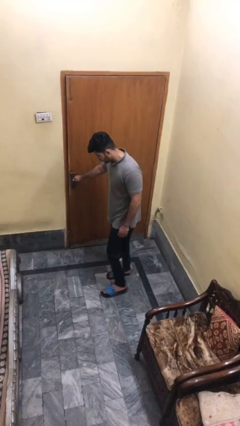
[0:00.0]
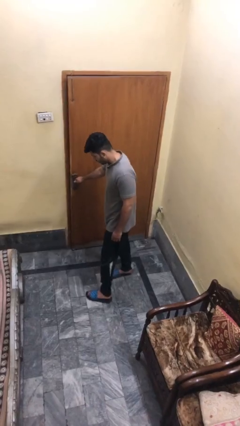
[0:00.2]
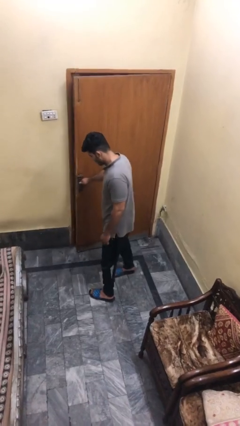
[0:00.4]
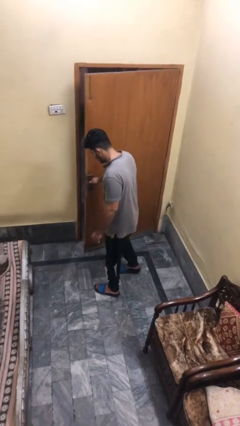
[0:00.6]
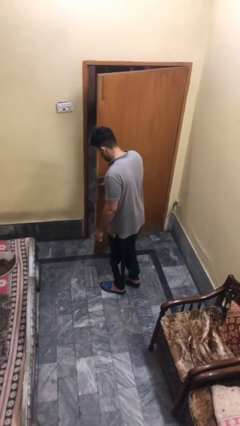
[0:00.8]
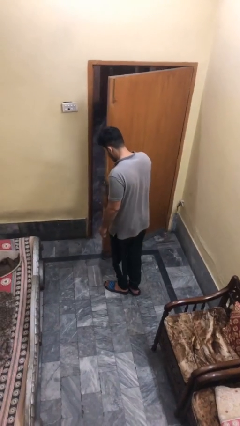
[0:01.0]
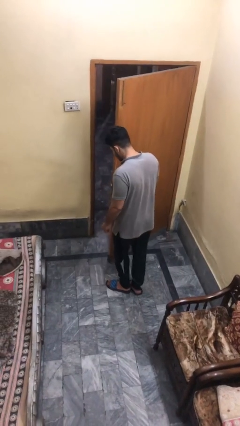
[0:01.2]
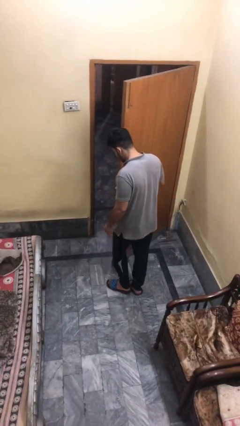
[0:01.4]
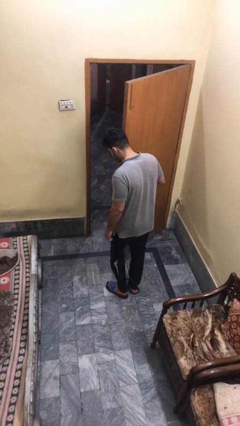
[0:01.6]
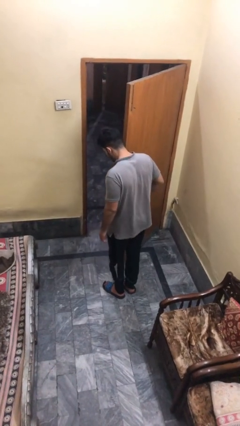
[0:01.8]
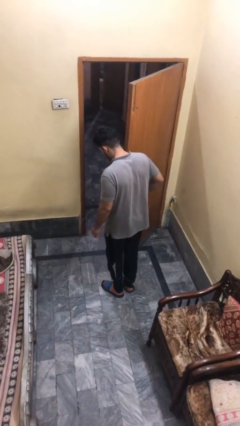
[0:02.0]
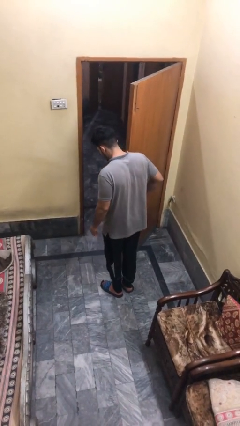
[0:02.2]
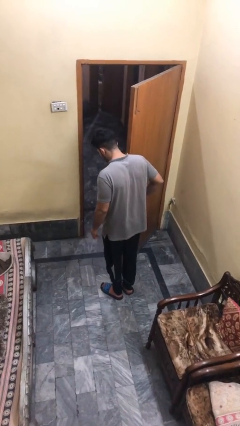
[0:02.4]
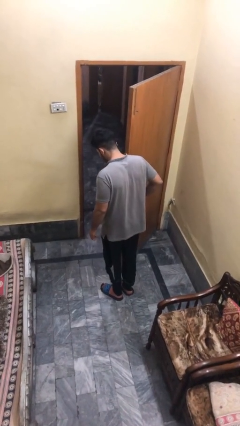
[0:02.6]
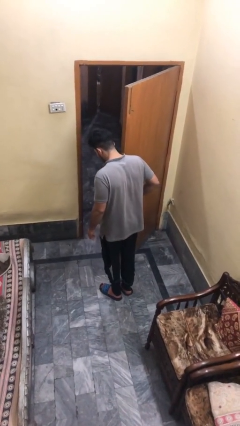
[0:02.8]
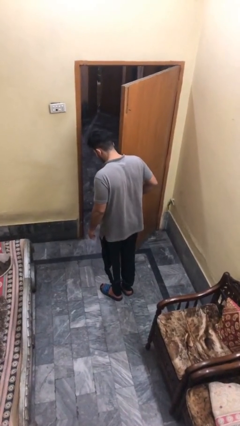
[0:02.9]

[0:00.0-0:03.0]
person opens facility door

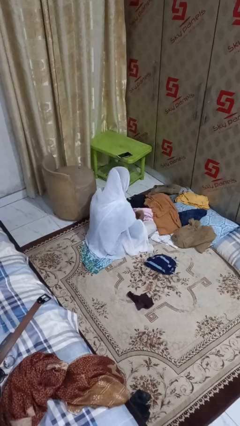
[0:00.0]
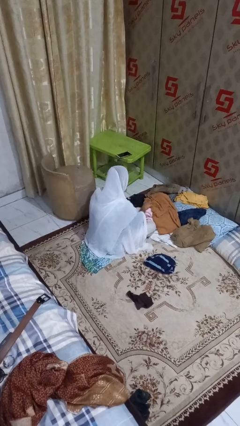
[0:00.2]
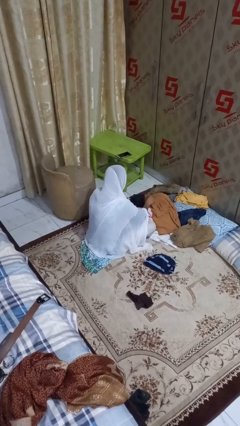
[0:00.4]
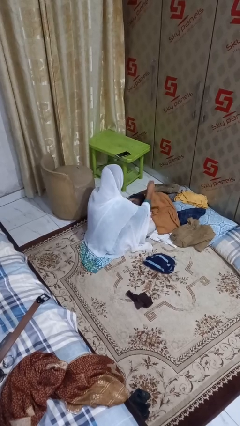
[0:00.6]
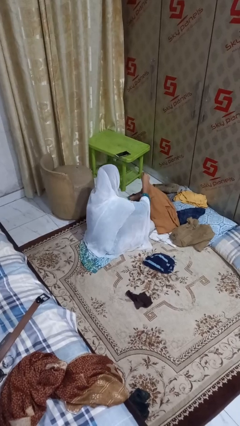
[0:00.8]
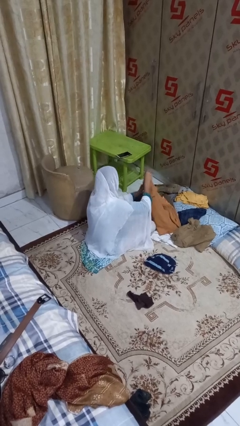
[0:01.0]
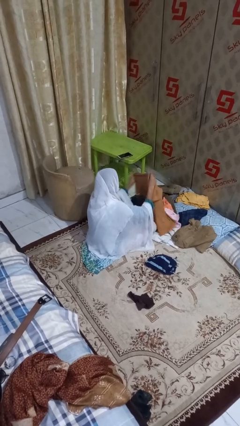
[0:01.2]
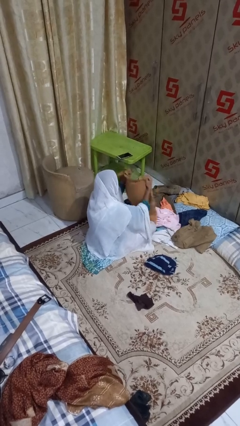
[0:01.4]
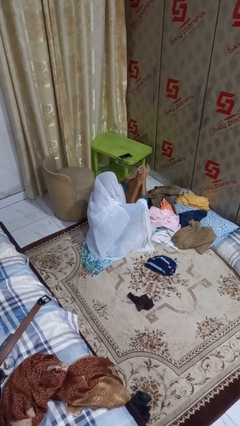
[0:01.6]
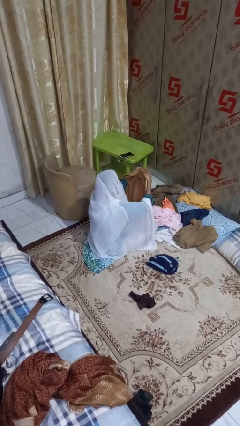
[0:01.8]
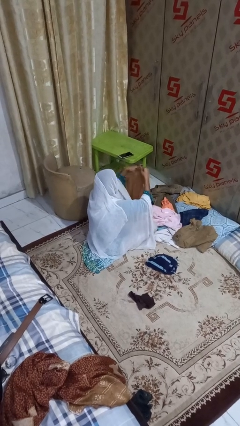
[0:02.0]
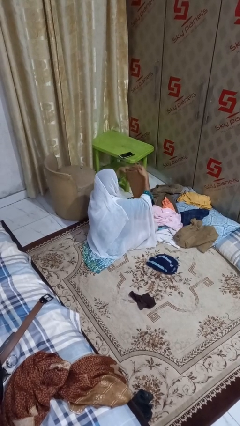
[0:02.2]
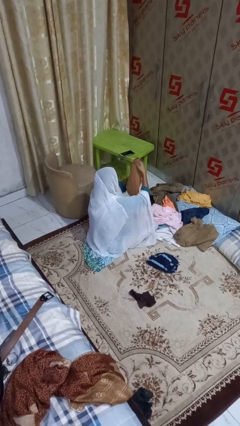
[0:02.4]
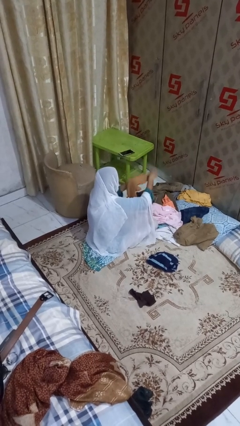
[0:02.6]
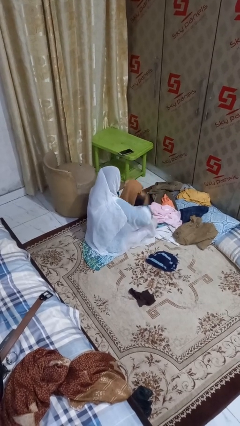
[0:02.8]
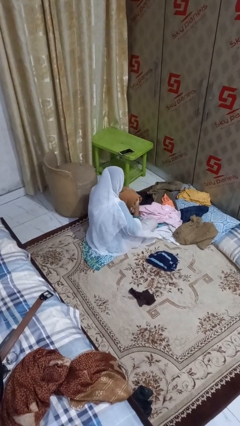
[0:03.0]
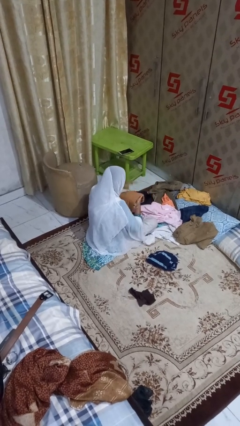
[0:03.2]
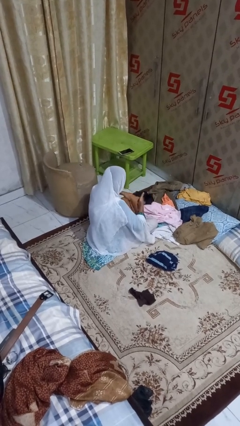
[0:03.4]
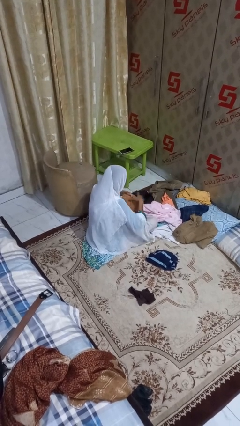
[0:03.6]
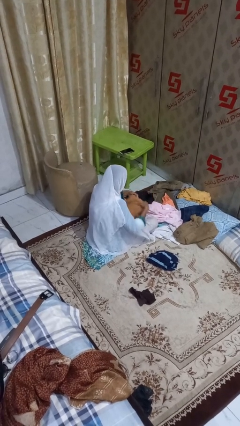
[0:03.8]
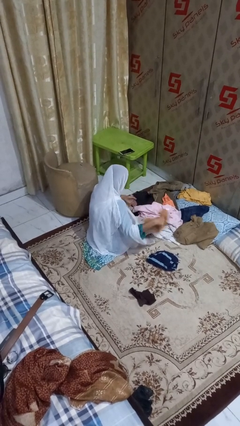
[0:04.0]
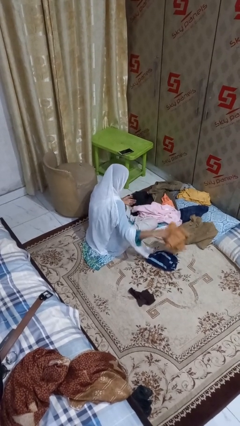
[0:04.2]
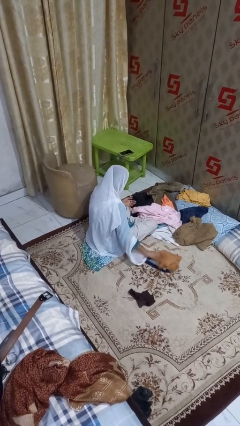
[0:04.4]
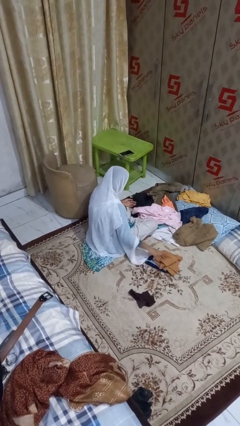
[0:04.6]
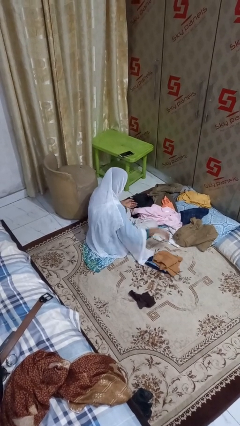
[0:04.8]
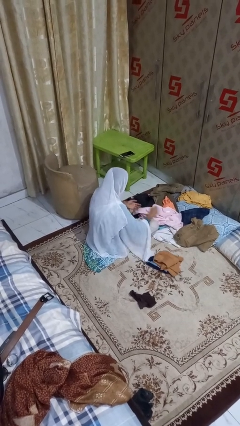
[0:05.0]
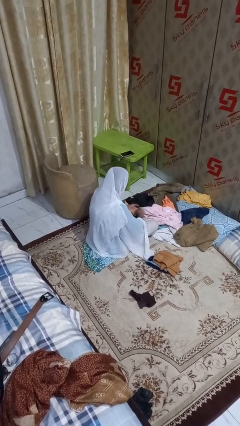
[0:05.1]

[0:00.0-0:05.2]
person folds shirt

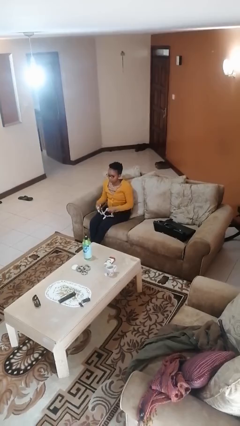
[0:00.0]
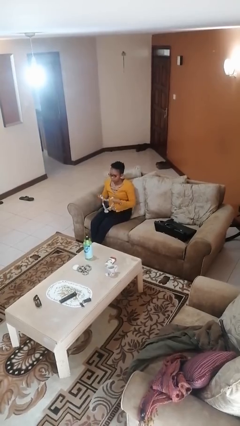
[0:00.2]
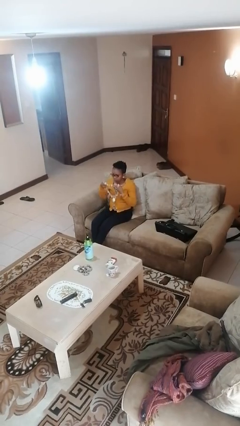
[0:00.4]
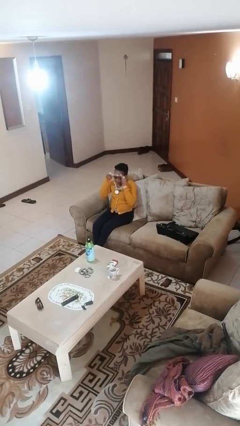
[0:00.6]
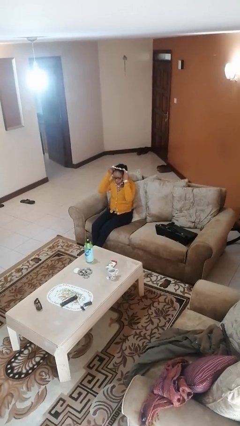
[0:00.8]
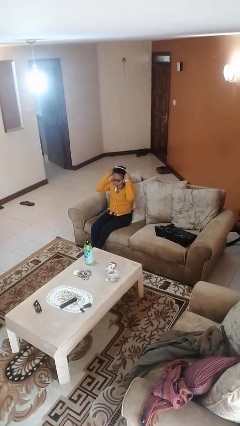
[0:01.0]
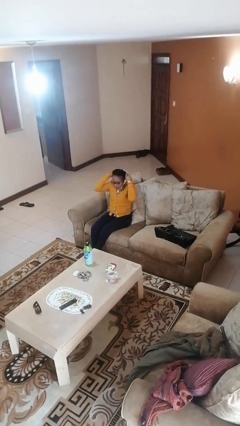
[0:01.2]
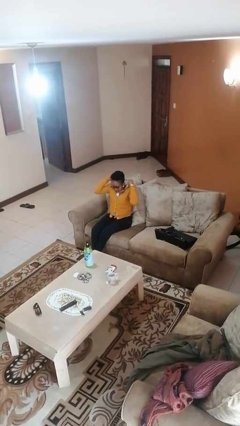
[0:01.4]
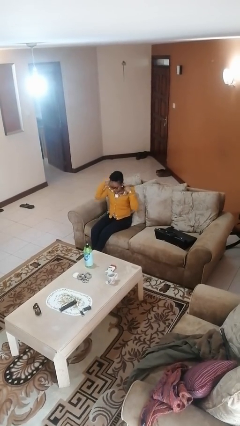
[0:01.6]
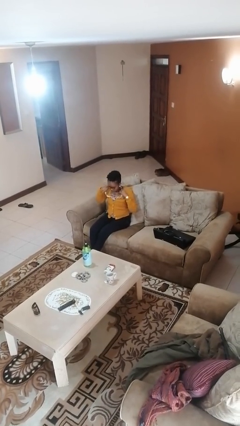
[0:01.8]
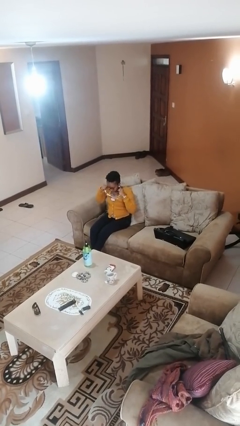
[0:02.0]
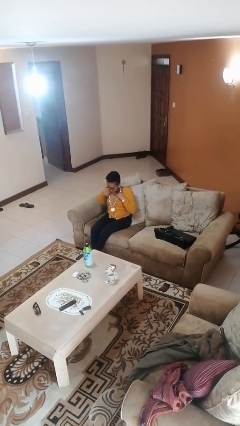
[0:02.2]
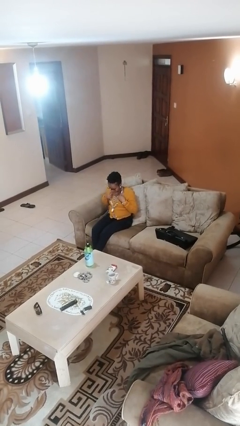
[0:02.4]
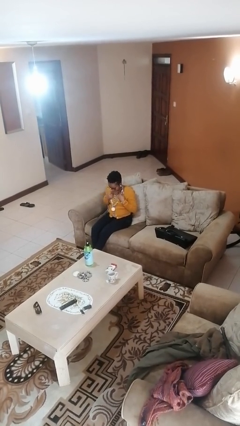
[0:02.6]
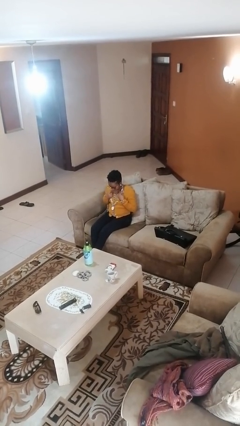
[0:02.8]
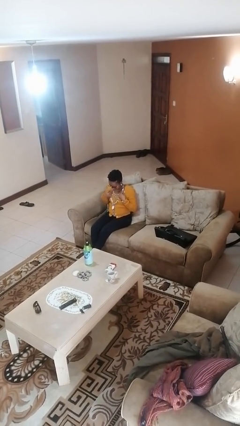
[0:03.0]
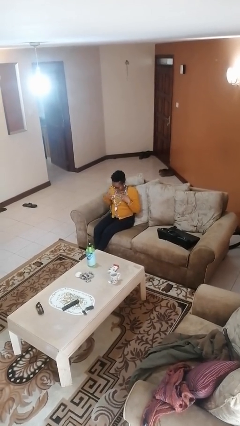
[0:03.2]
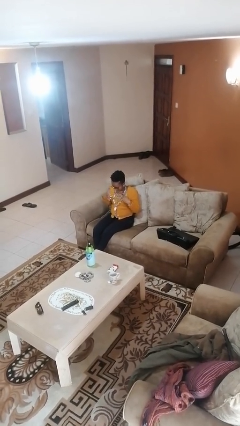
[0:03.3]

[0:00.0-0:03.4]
person puts on necklace

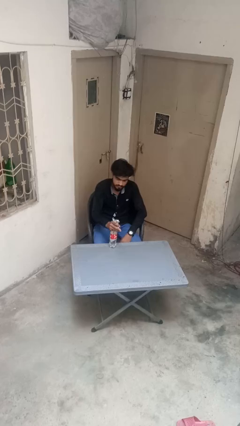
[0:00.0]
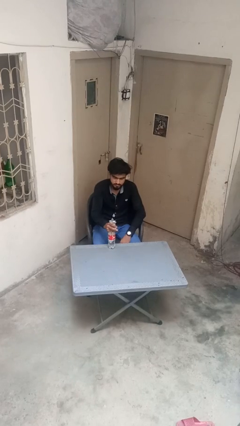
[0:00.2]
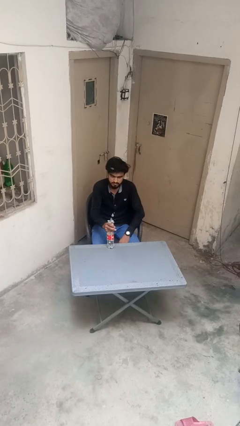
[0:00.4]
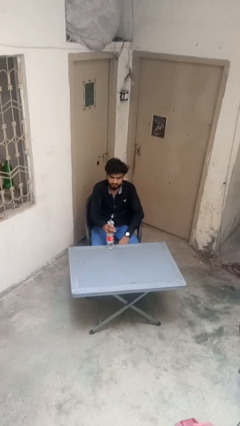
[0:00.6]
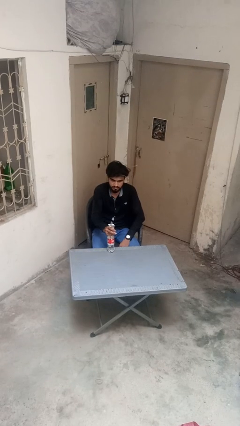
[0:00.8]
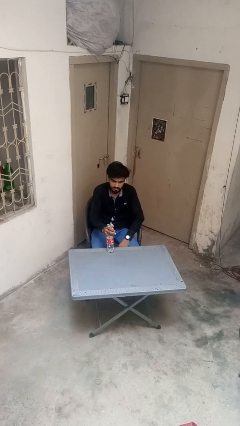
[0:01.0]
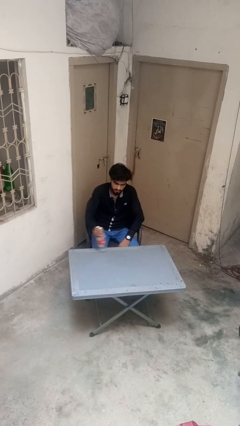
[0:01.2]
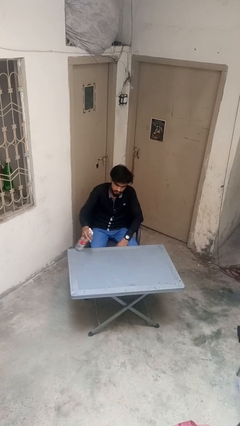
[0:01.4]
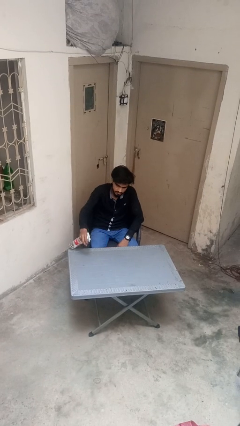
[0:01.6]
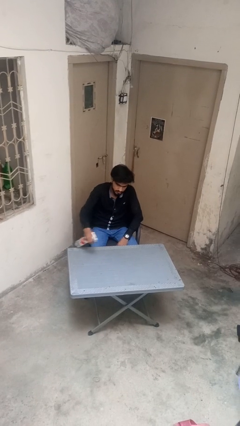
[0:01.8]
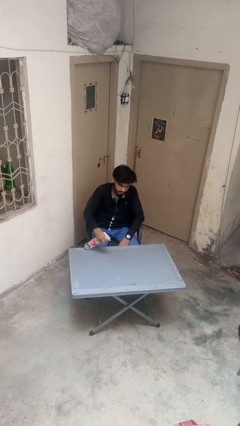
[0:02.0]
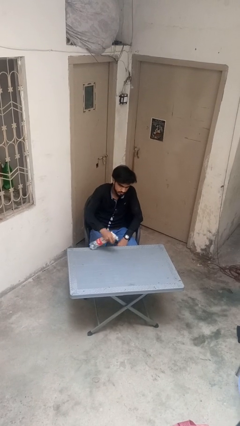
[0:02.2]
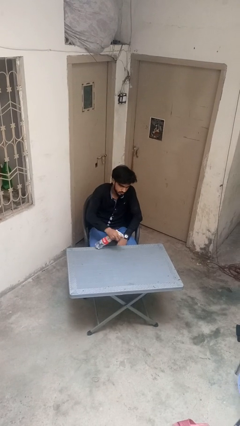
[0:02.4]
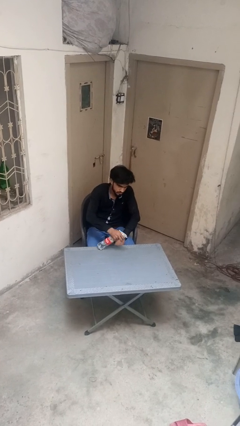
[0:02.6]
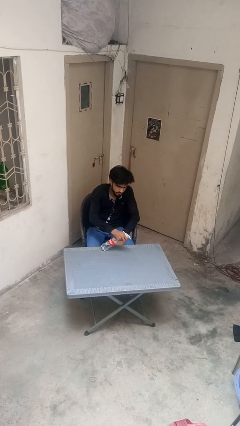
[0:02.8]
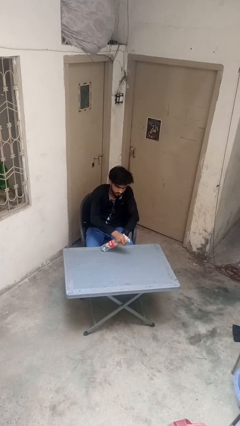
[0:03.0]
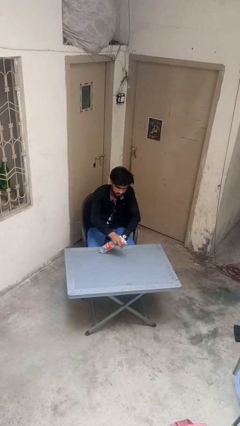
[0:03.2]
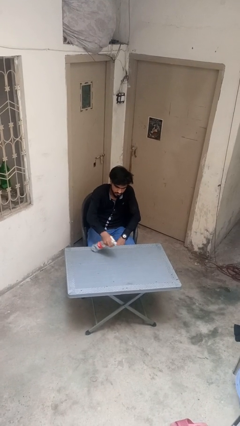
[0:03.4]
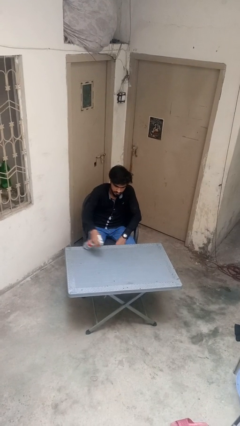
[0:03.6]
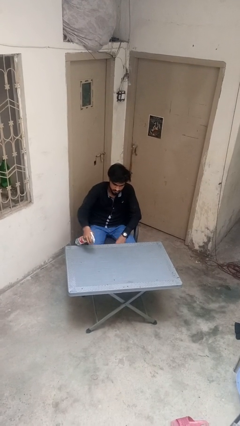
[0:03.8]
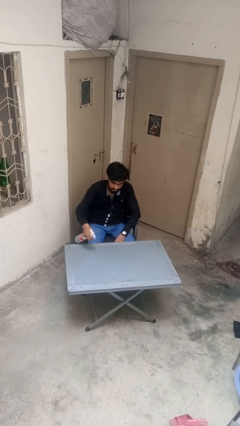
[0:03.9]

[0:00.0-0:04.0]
person sprays from bottle

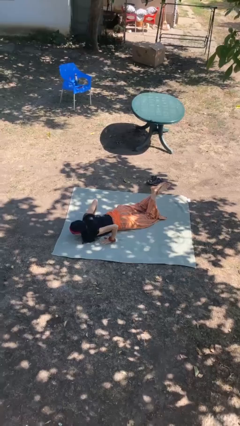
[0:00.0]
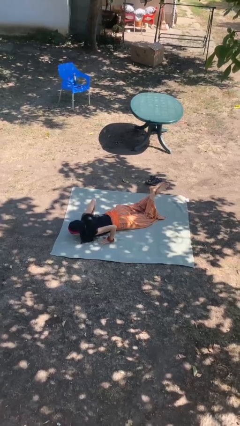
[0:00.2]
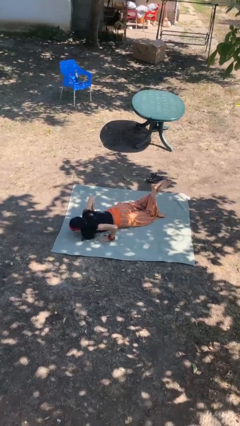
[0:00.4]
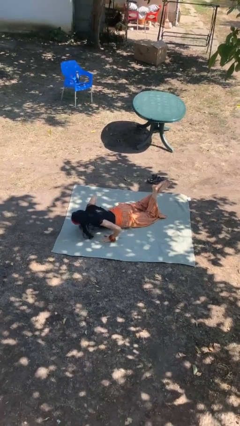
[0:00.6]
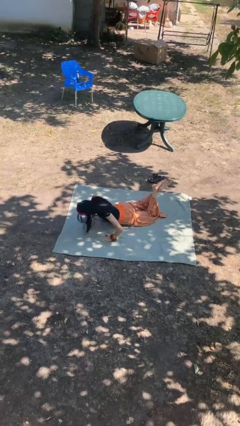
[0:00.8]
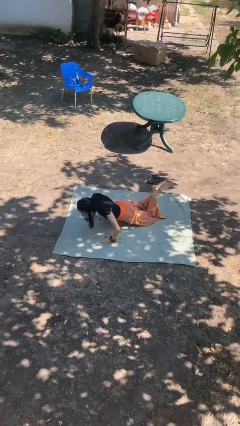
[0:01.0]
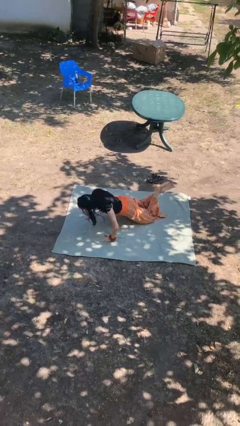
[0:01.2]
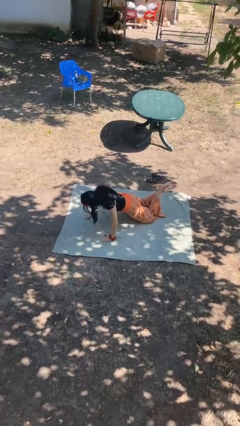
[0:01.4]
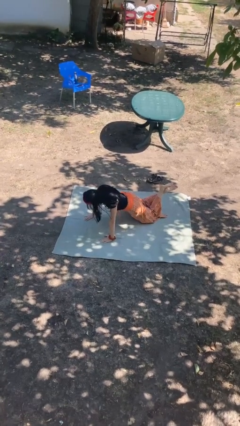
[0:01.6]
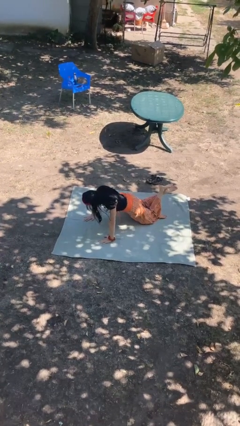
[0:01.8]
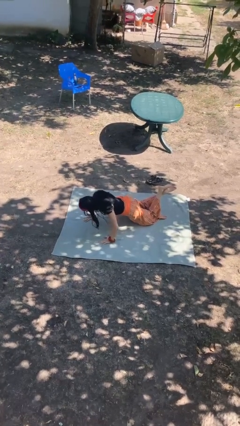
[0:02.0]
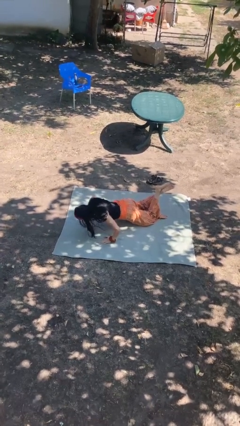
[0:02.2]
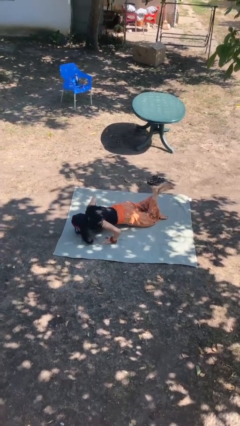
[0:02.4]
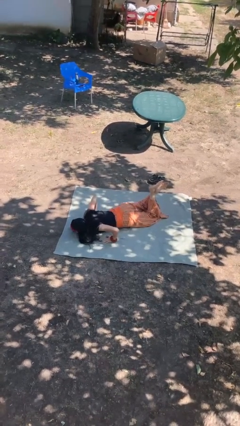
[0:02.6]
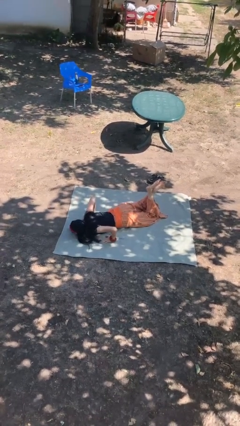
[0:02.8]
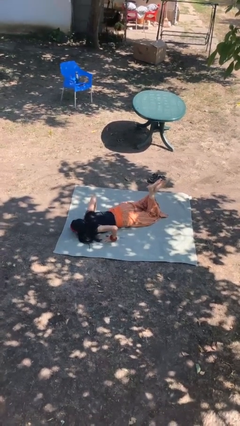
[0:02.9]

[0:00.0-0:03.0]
person exercises with pushup
